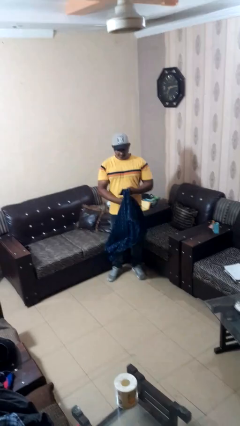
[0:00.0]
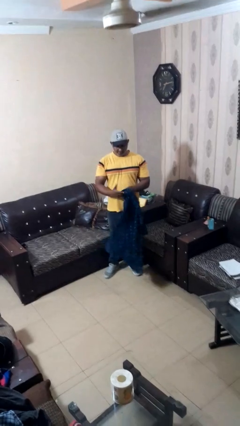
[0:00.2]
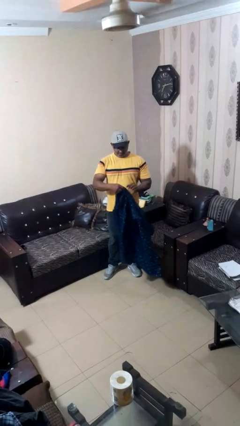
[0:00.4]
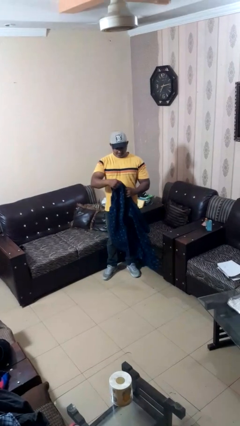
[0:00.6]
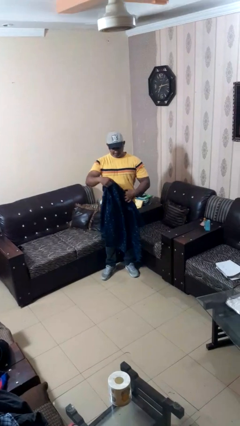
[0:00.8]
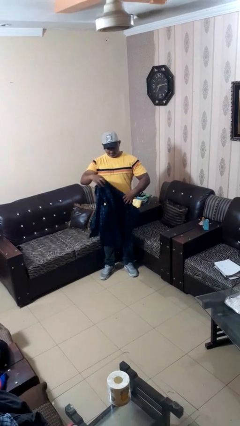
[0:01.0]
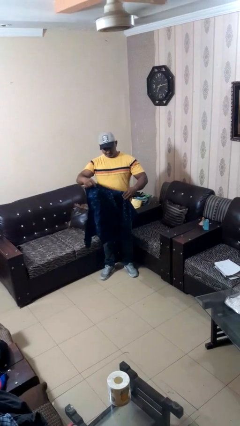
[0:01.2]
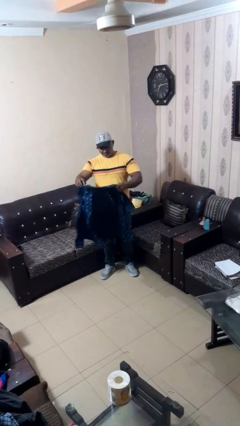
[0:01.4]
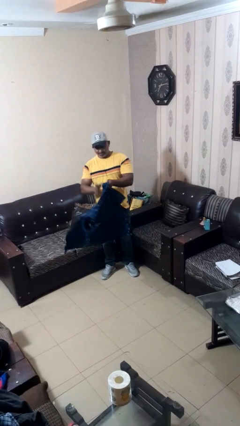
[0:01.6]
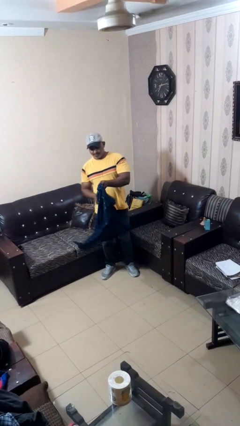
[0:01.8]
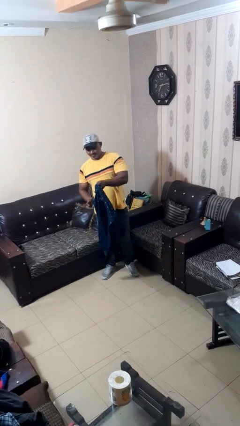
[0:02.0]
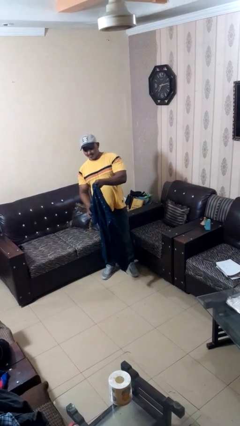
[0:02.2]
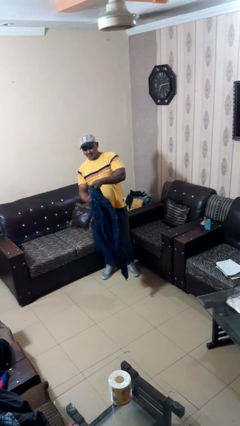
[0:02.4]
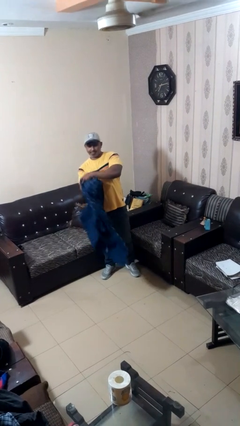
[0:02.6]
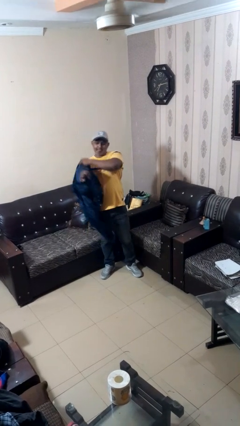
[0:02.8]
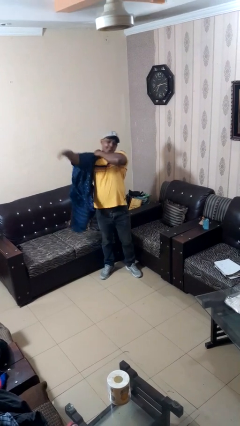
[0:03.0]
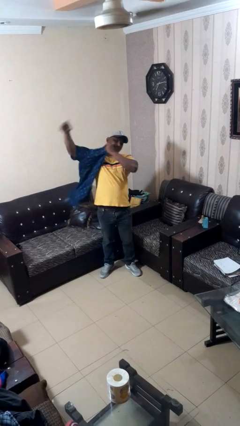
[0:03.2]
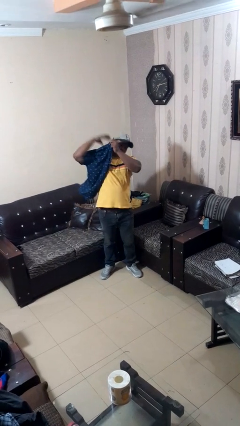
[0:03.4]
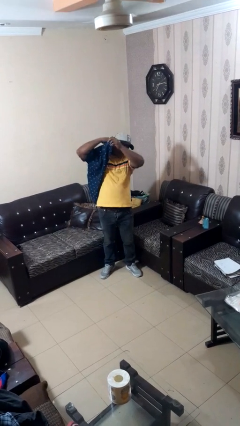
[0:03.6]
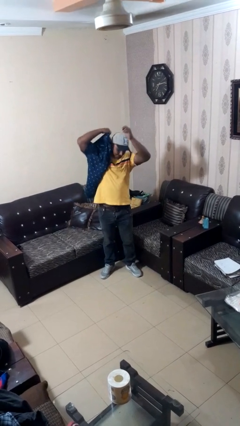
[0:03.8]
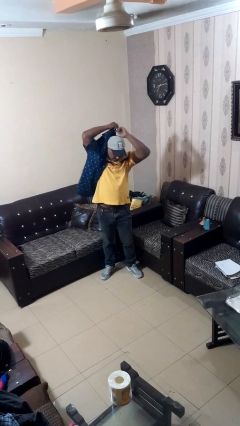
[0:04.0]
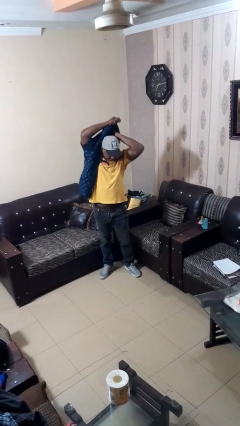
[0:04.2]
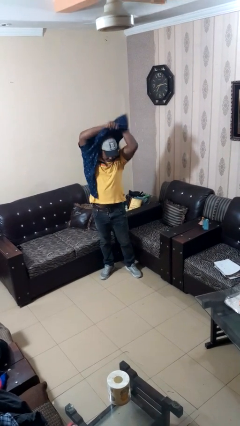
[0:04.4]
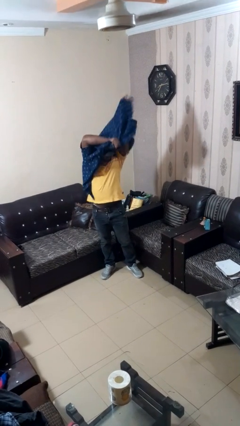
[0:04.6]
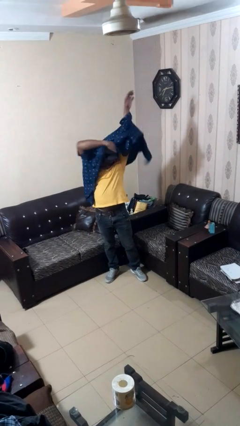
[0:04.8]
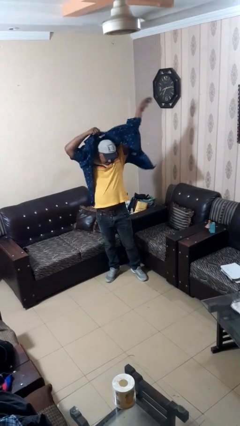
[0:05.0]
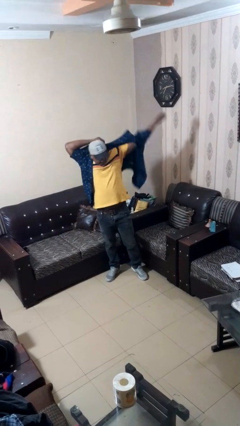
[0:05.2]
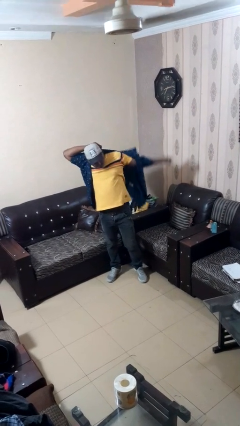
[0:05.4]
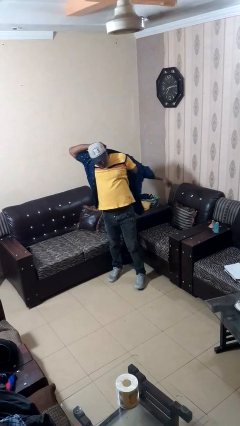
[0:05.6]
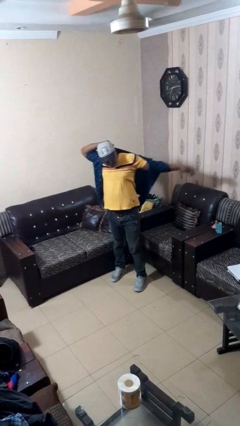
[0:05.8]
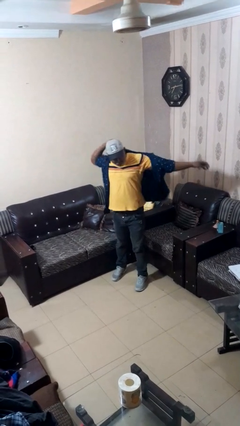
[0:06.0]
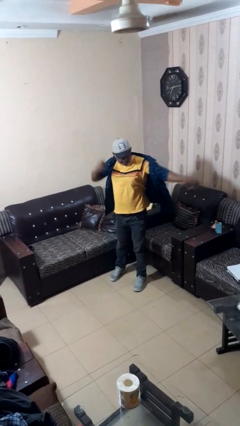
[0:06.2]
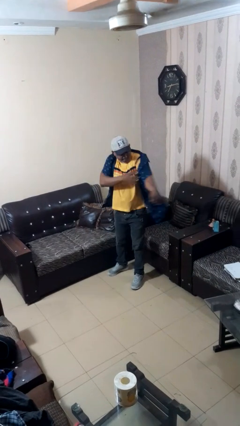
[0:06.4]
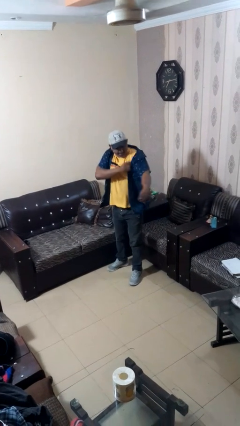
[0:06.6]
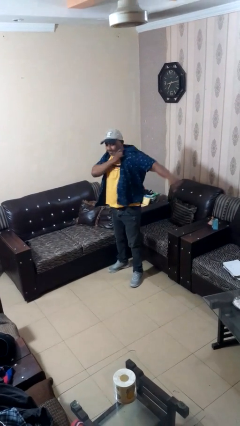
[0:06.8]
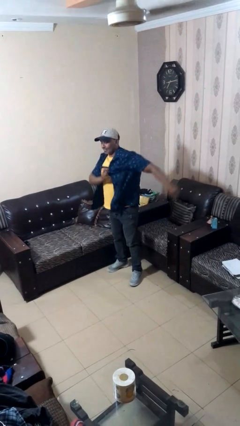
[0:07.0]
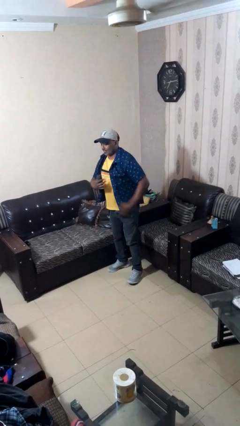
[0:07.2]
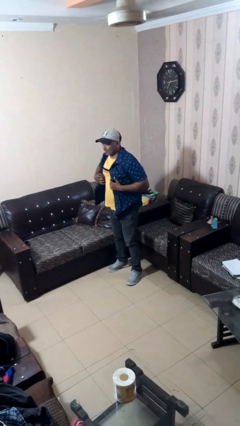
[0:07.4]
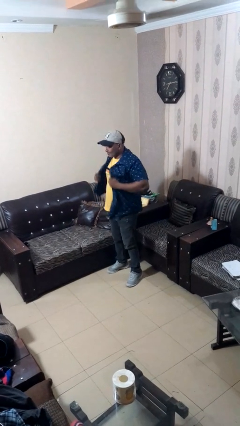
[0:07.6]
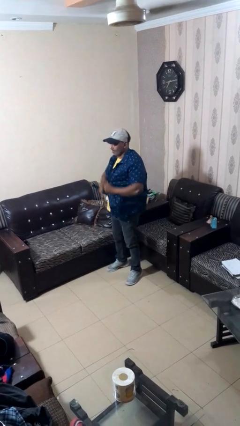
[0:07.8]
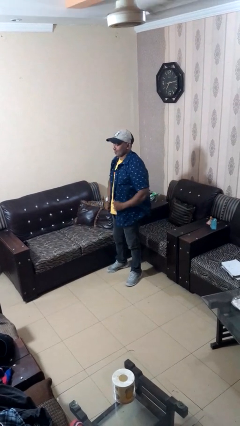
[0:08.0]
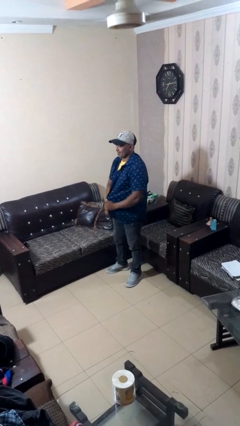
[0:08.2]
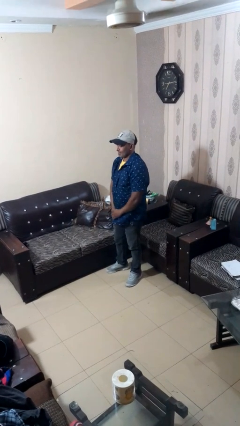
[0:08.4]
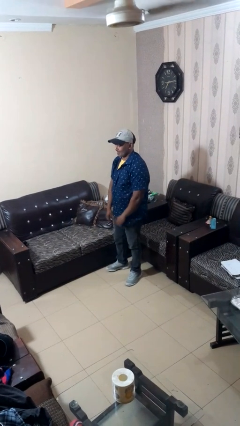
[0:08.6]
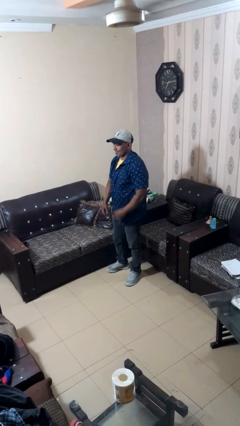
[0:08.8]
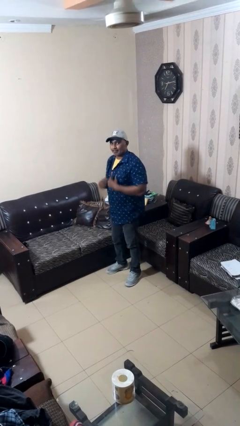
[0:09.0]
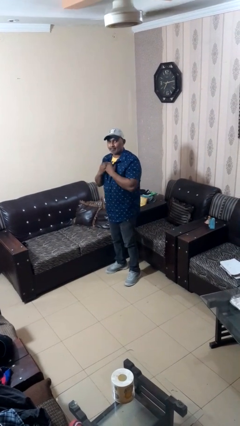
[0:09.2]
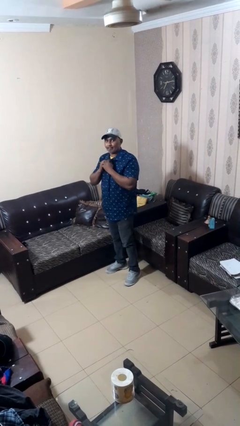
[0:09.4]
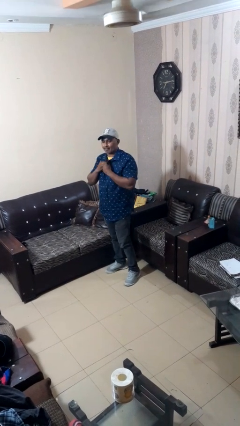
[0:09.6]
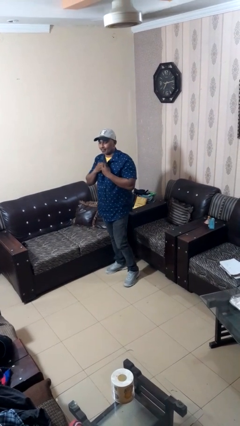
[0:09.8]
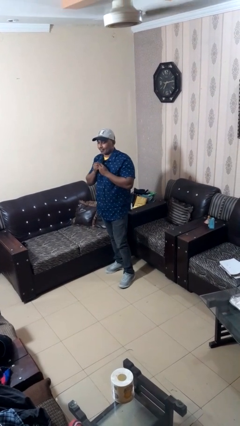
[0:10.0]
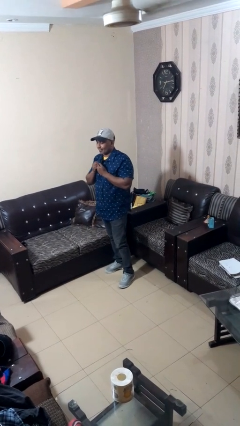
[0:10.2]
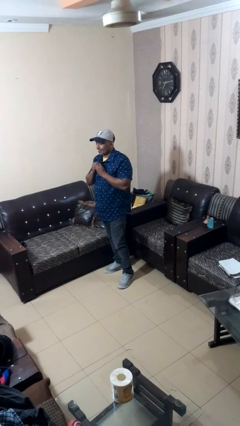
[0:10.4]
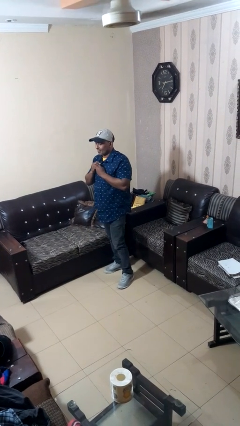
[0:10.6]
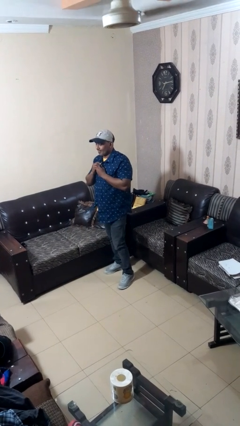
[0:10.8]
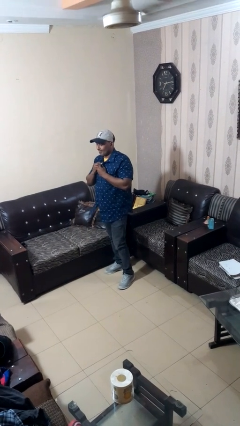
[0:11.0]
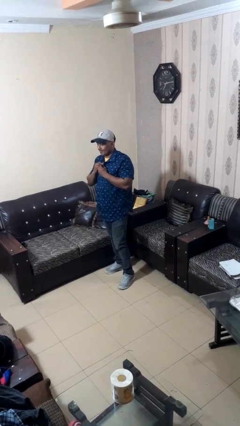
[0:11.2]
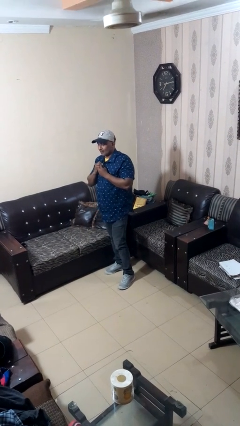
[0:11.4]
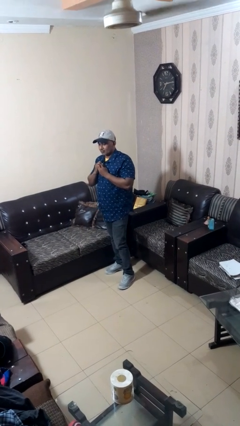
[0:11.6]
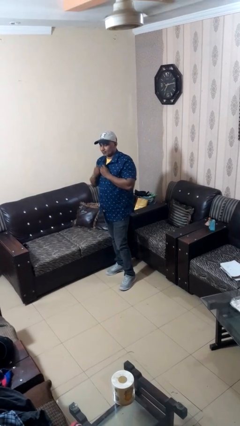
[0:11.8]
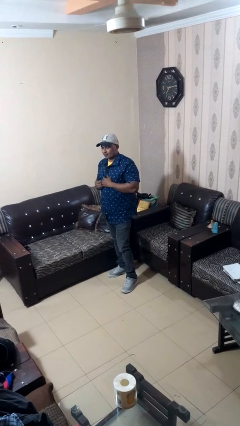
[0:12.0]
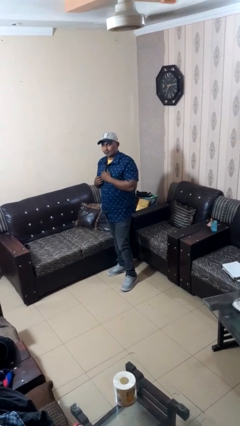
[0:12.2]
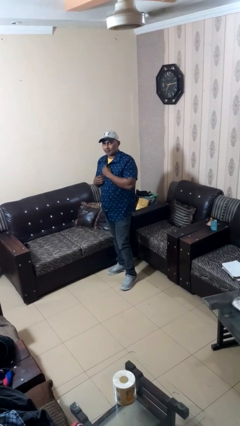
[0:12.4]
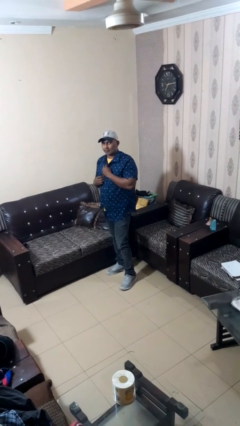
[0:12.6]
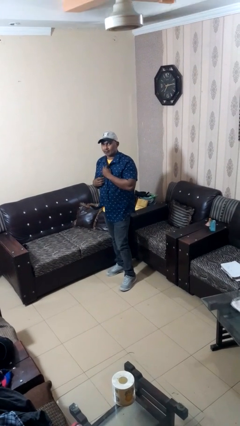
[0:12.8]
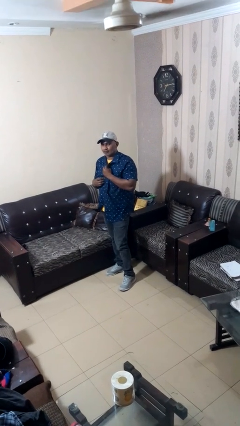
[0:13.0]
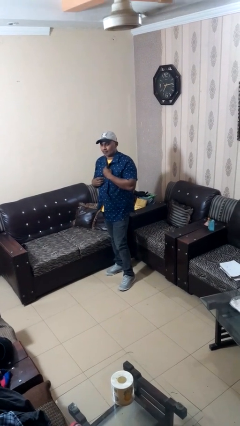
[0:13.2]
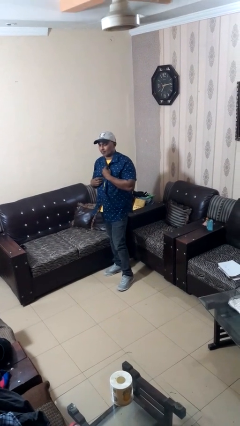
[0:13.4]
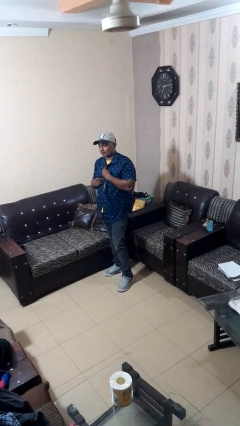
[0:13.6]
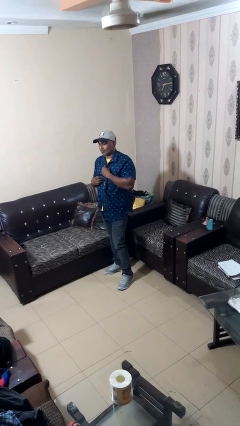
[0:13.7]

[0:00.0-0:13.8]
person puts on shirt

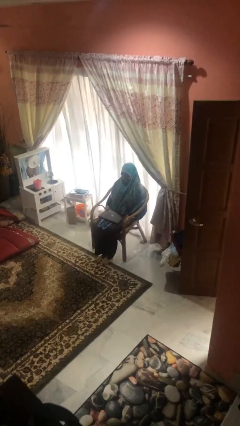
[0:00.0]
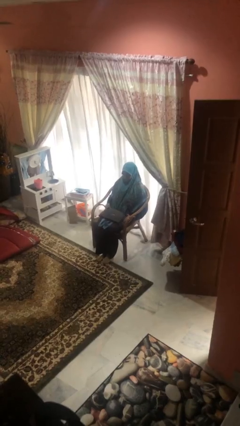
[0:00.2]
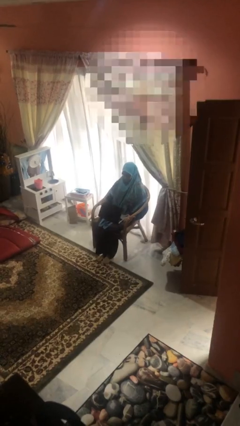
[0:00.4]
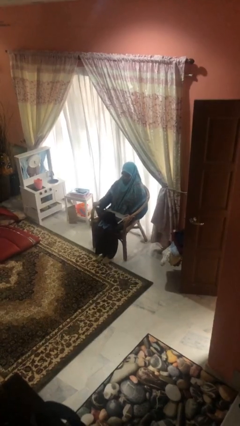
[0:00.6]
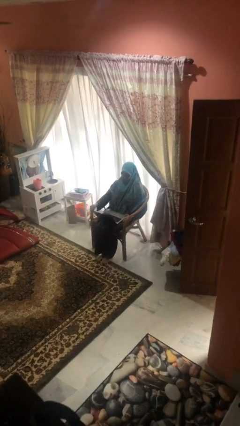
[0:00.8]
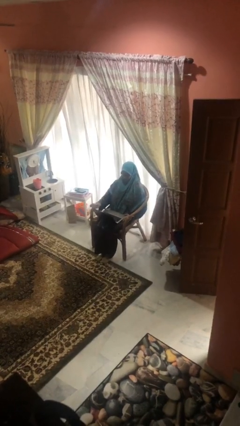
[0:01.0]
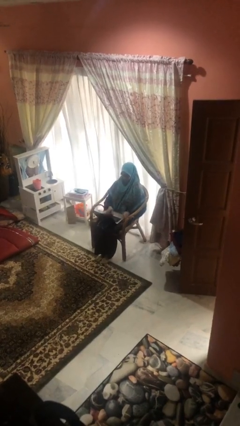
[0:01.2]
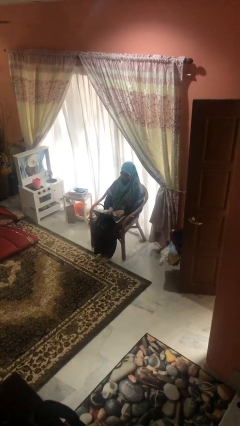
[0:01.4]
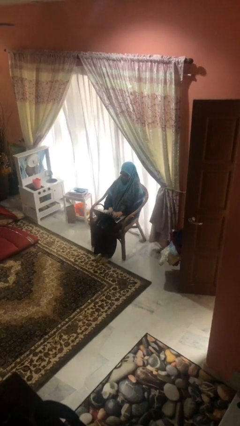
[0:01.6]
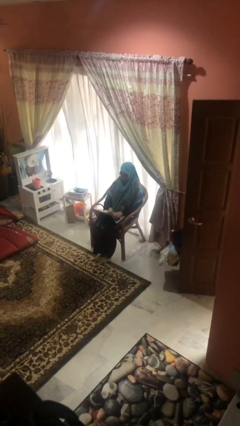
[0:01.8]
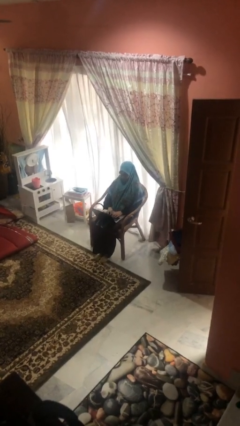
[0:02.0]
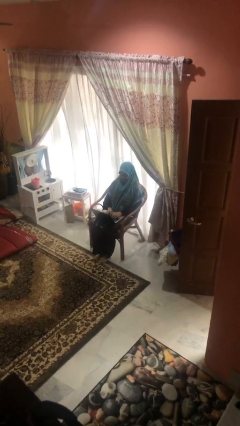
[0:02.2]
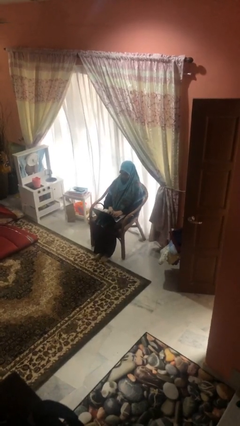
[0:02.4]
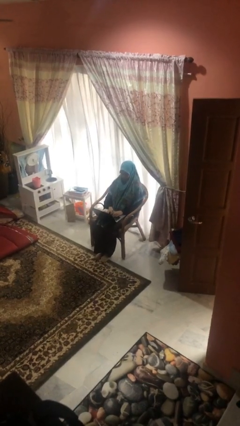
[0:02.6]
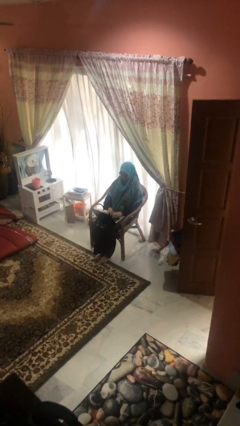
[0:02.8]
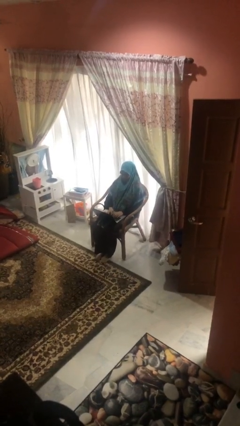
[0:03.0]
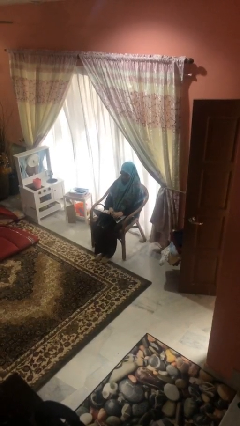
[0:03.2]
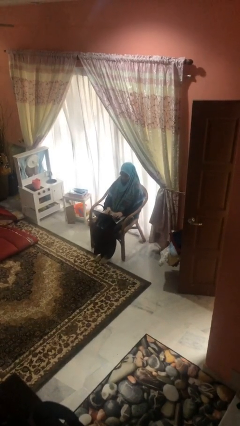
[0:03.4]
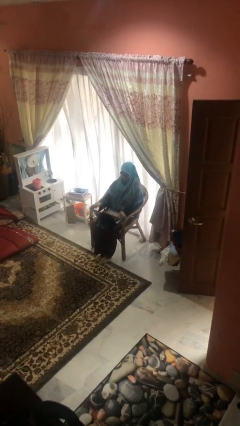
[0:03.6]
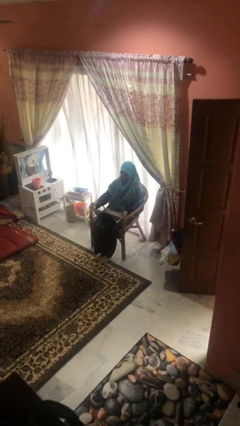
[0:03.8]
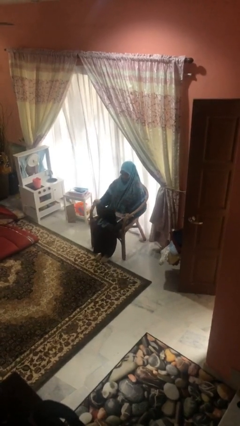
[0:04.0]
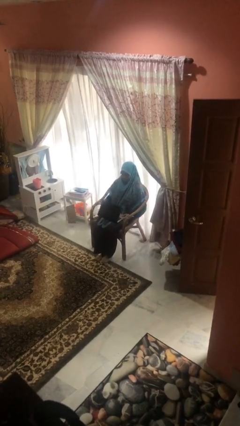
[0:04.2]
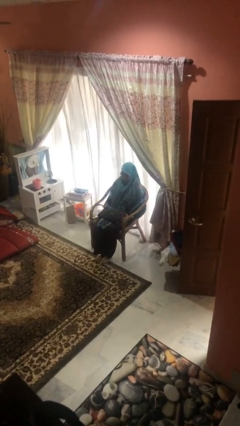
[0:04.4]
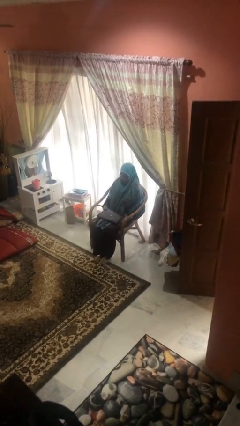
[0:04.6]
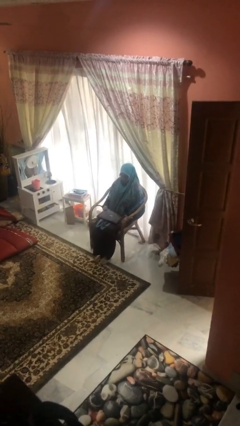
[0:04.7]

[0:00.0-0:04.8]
person interacts with laptop
